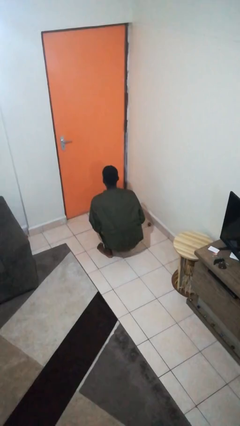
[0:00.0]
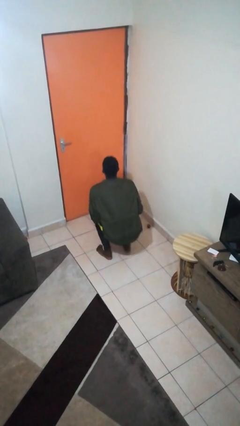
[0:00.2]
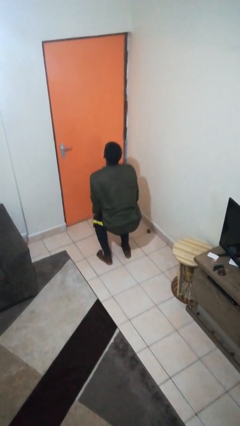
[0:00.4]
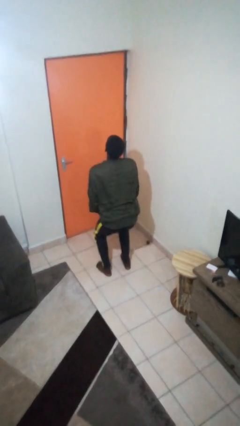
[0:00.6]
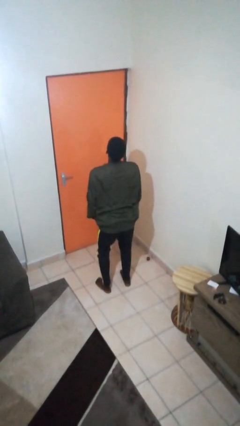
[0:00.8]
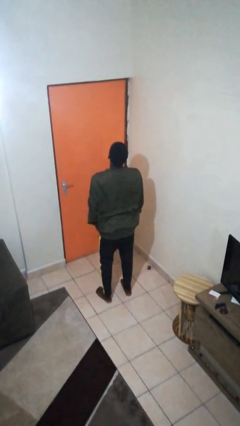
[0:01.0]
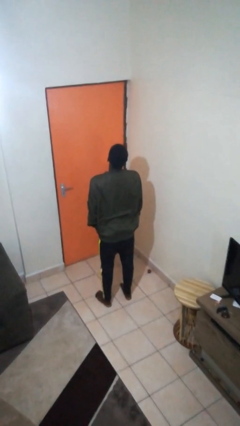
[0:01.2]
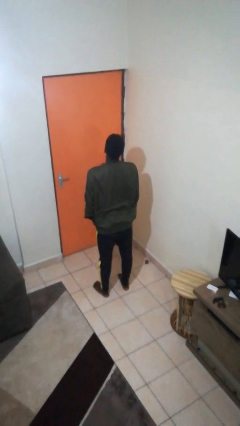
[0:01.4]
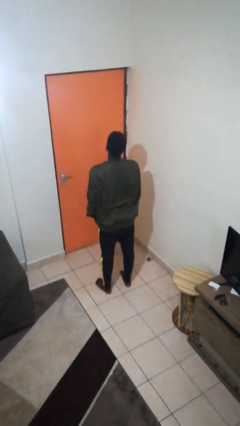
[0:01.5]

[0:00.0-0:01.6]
person stands up

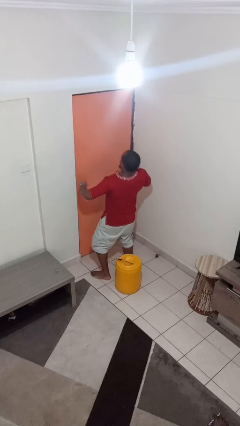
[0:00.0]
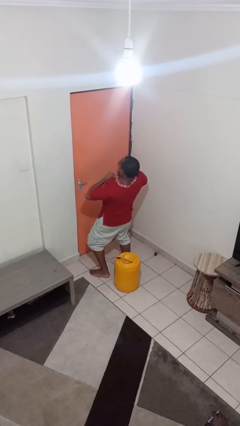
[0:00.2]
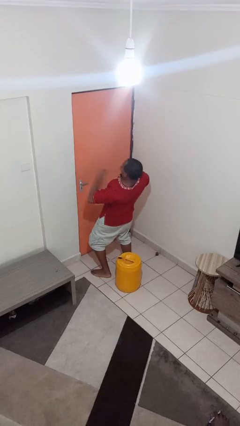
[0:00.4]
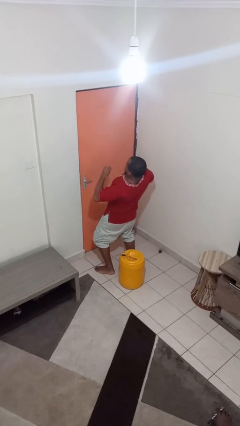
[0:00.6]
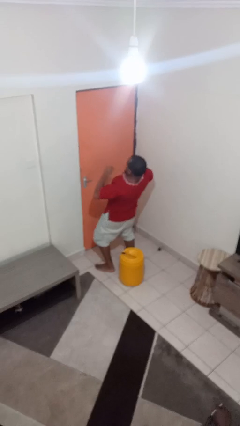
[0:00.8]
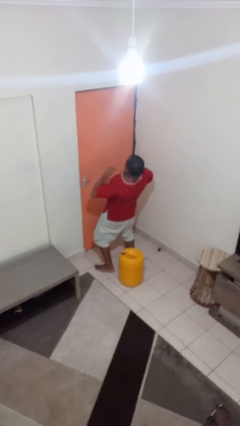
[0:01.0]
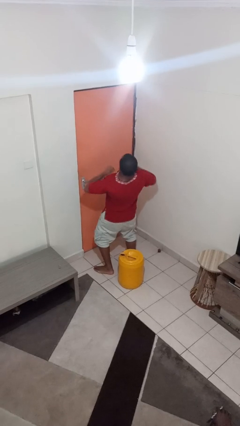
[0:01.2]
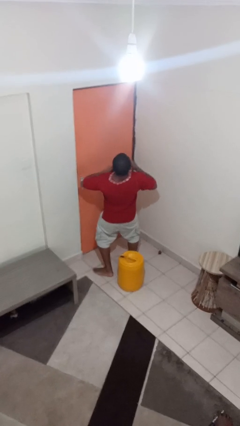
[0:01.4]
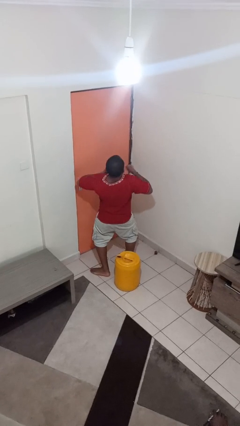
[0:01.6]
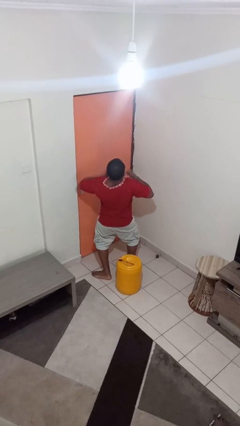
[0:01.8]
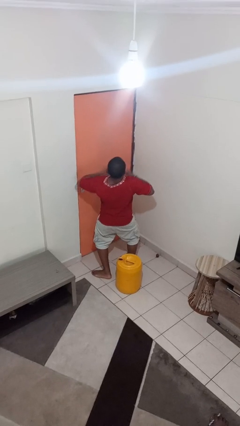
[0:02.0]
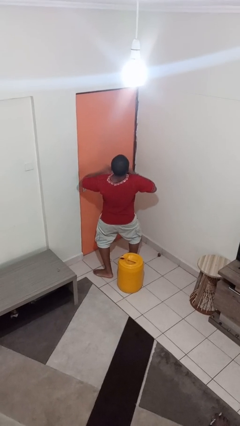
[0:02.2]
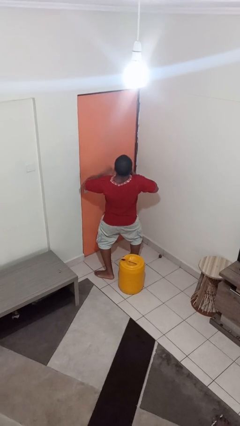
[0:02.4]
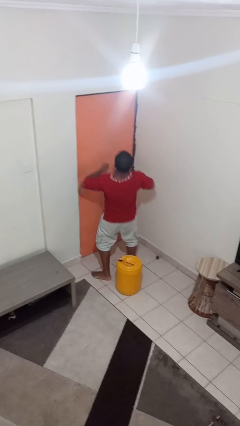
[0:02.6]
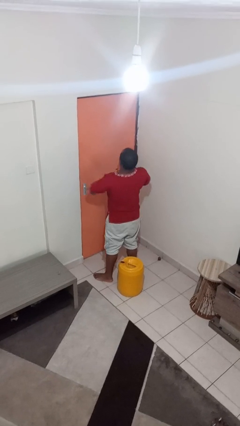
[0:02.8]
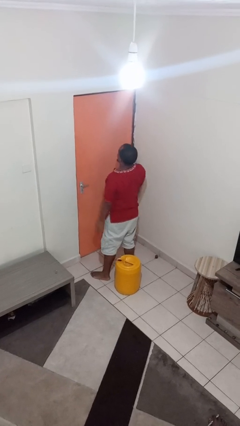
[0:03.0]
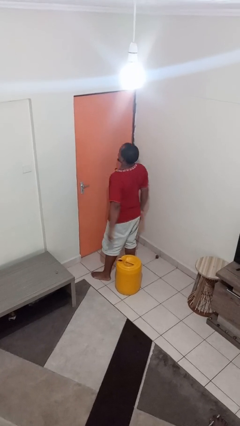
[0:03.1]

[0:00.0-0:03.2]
person drums on chest

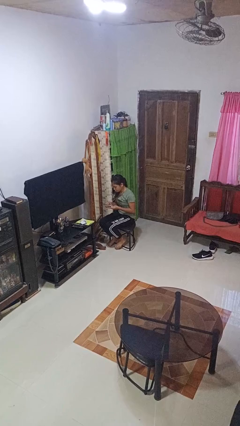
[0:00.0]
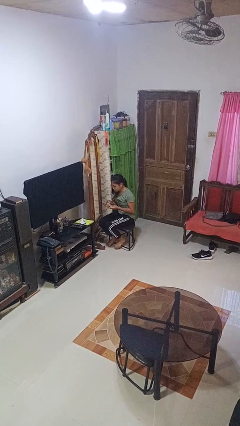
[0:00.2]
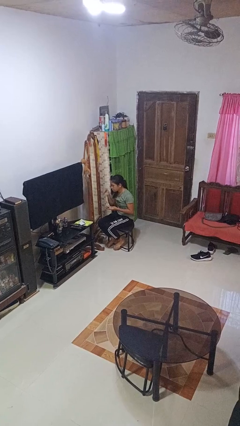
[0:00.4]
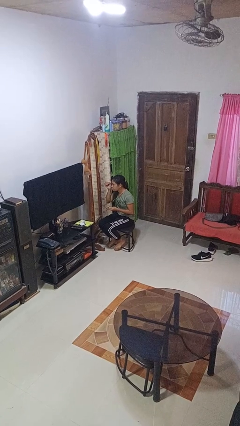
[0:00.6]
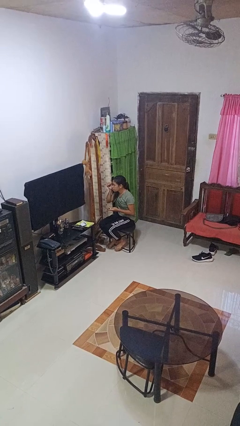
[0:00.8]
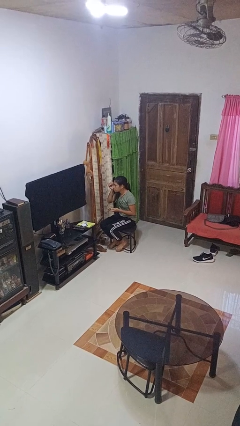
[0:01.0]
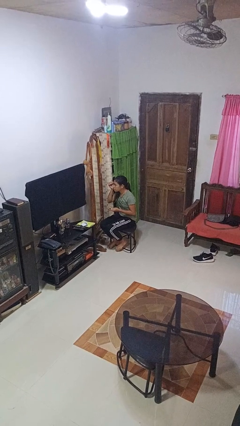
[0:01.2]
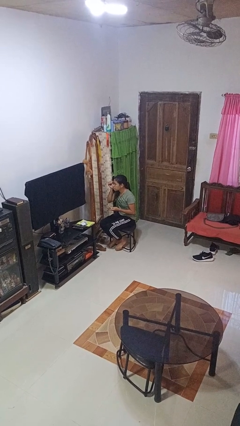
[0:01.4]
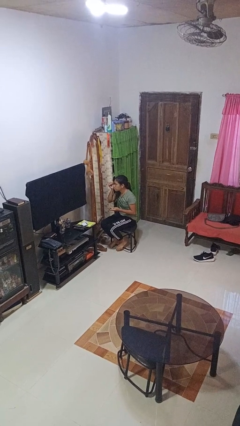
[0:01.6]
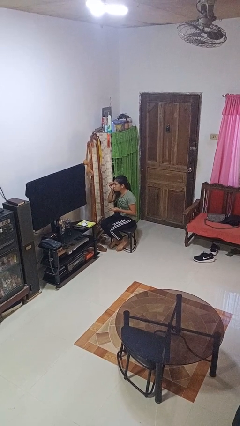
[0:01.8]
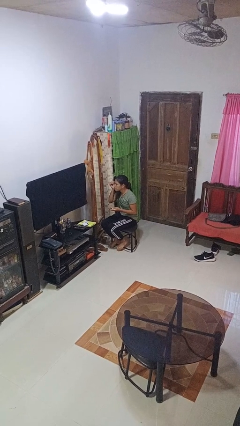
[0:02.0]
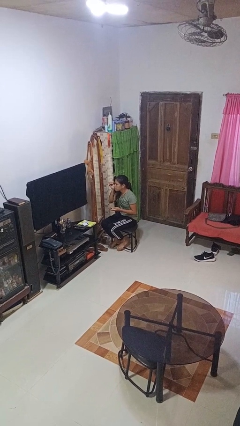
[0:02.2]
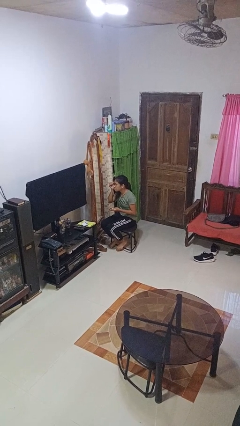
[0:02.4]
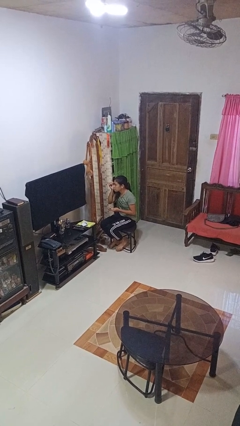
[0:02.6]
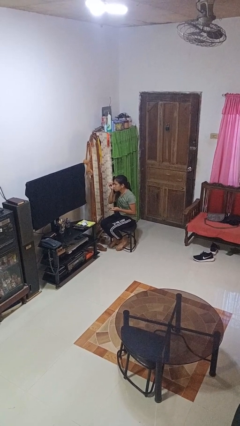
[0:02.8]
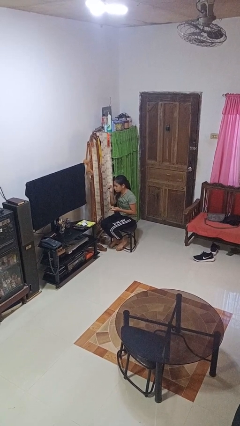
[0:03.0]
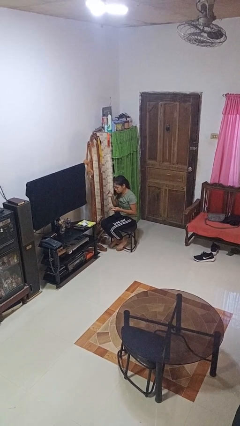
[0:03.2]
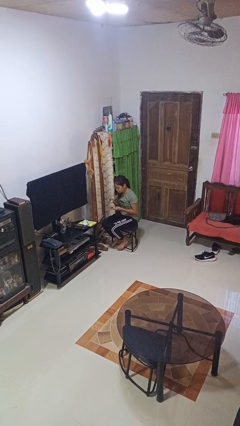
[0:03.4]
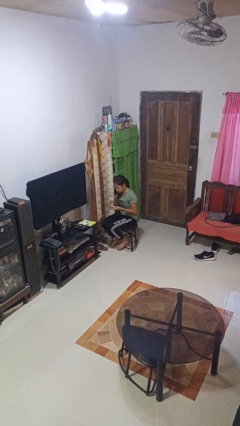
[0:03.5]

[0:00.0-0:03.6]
person applies eye makeup

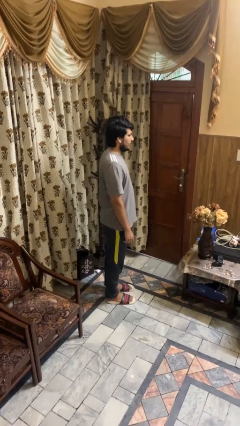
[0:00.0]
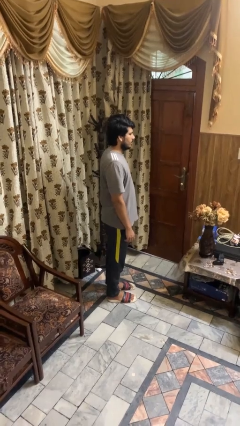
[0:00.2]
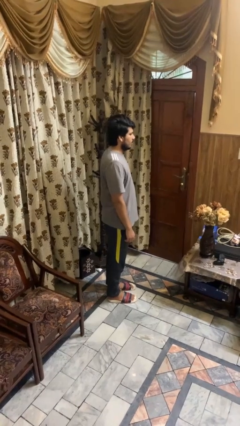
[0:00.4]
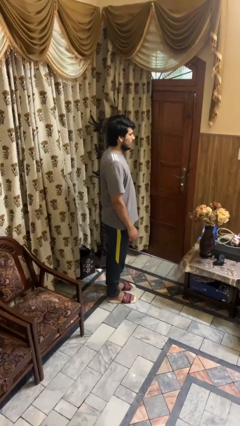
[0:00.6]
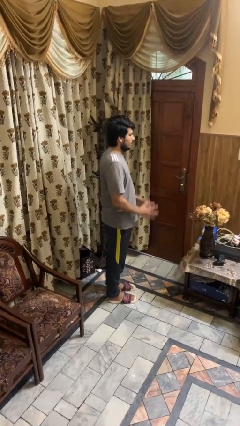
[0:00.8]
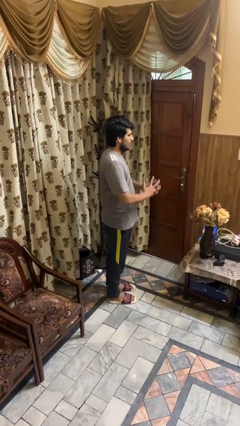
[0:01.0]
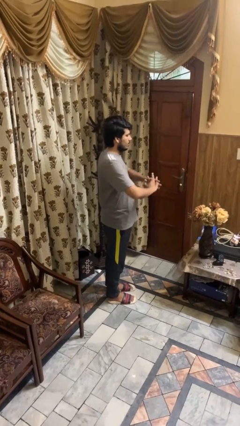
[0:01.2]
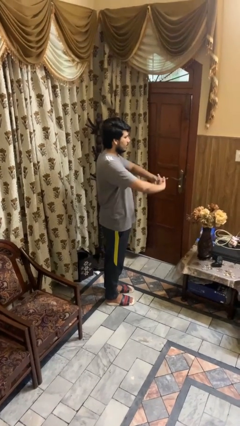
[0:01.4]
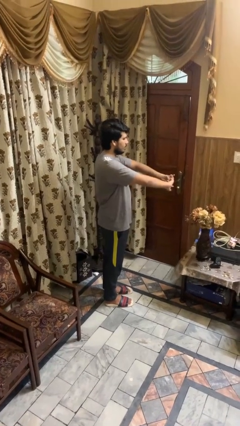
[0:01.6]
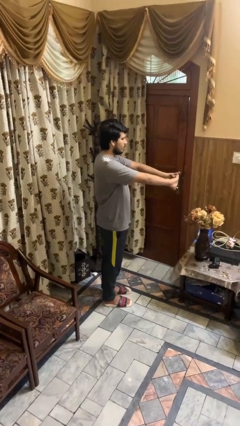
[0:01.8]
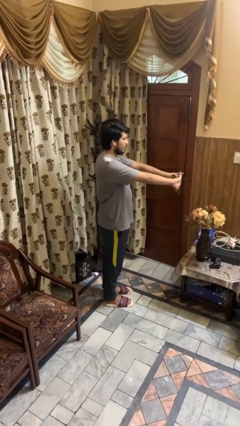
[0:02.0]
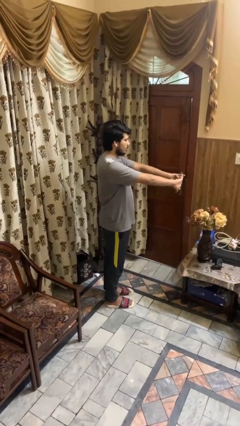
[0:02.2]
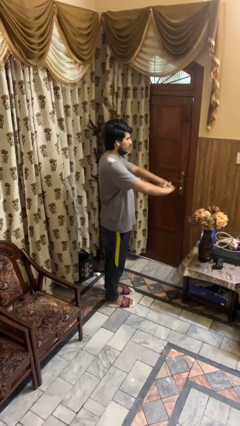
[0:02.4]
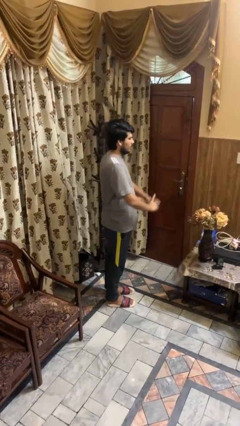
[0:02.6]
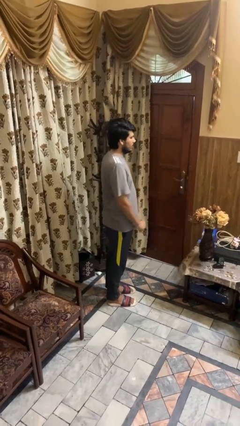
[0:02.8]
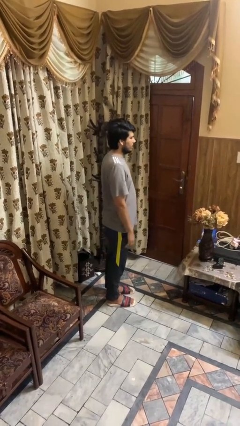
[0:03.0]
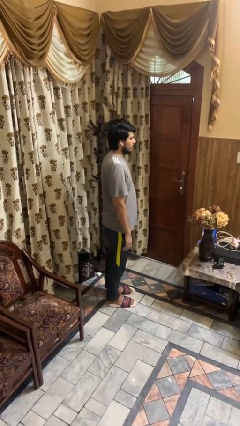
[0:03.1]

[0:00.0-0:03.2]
person cracks knuckles

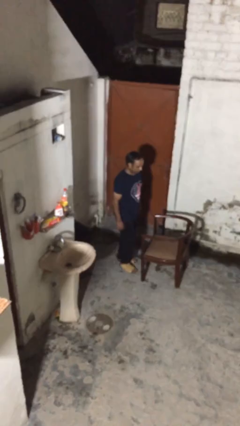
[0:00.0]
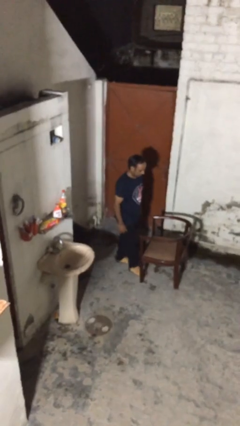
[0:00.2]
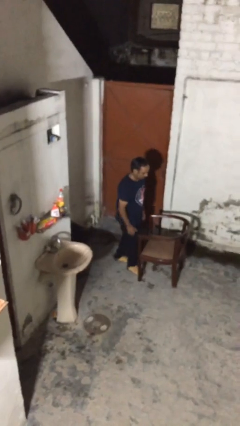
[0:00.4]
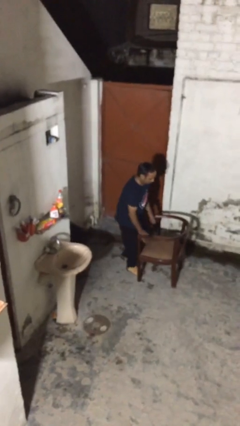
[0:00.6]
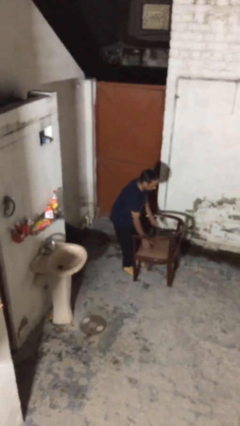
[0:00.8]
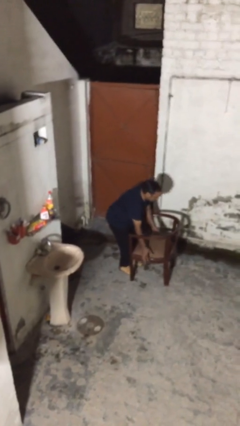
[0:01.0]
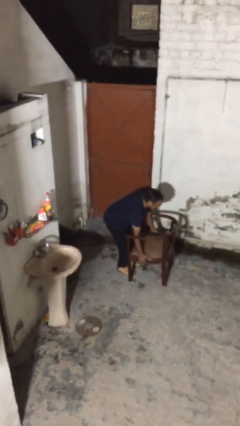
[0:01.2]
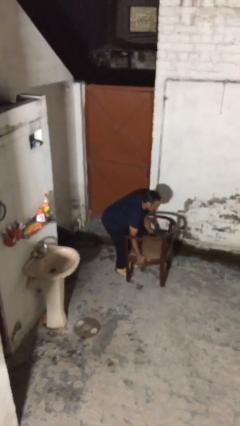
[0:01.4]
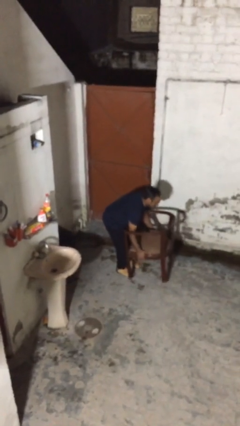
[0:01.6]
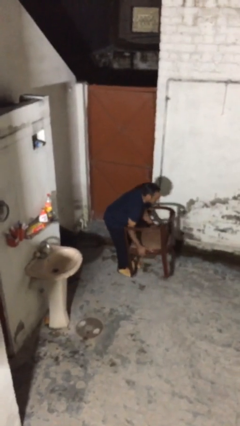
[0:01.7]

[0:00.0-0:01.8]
person picks up object from floor

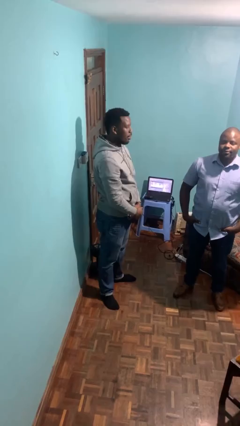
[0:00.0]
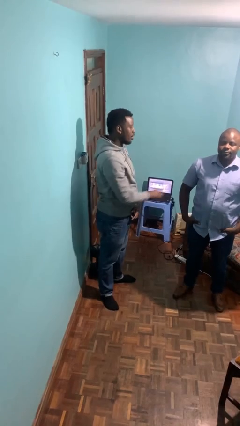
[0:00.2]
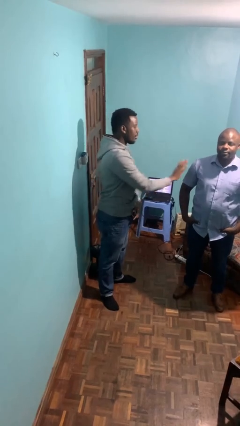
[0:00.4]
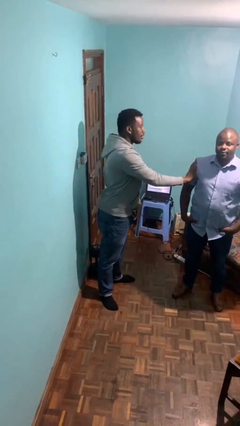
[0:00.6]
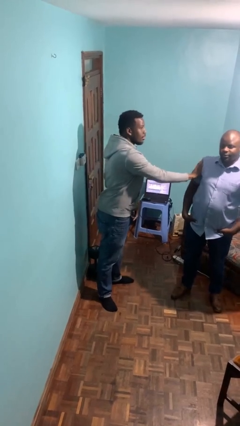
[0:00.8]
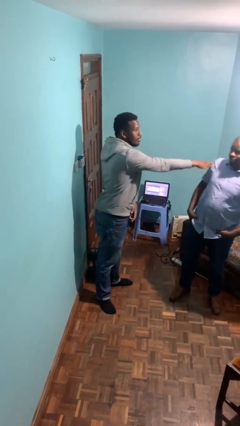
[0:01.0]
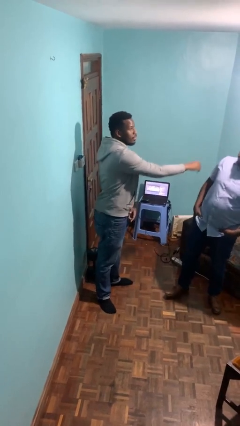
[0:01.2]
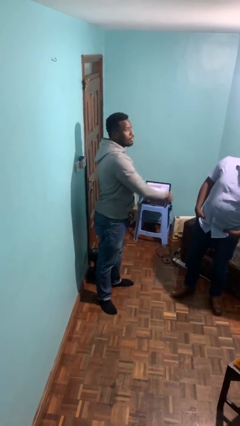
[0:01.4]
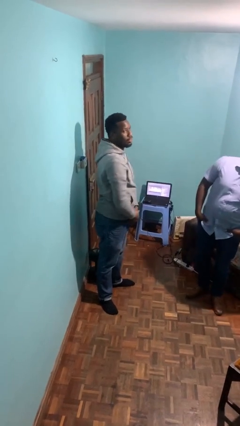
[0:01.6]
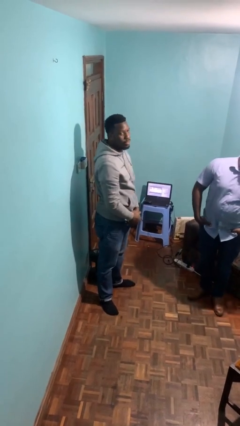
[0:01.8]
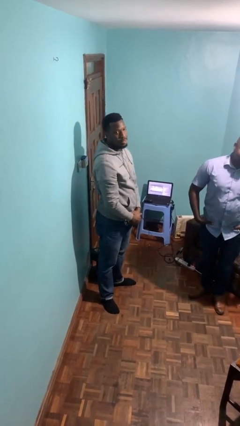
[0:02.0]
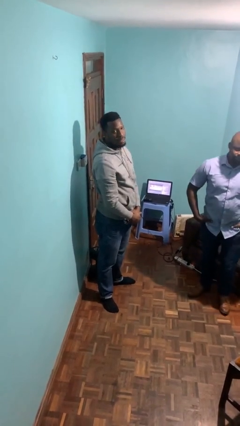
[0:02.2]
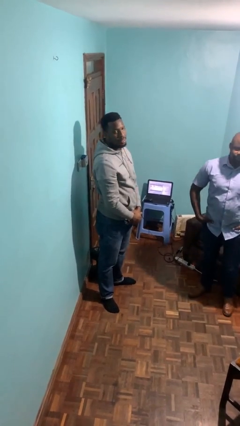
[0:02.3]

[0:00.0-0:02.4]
person shoves person

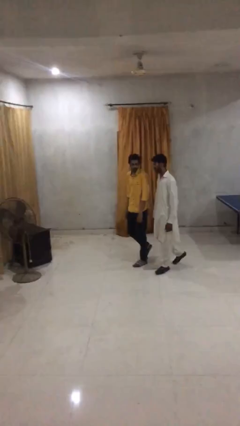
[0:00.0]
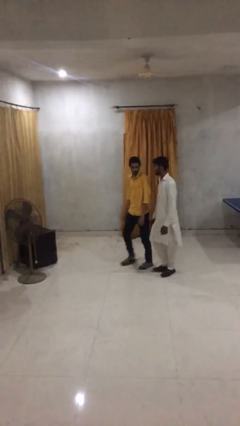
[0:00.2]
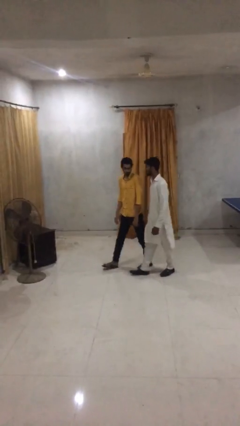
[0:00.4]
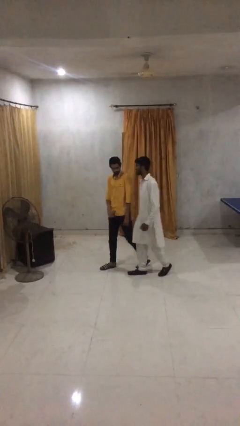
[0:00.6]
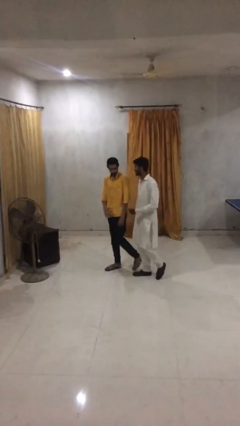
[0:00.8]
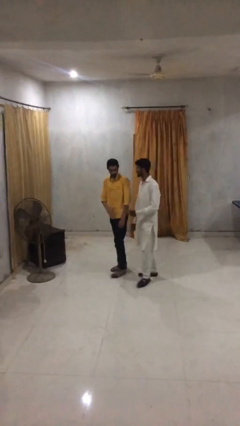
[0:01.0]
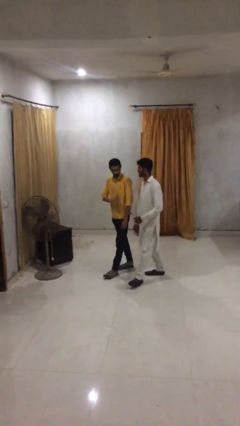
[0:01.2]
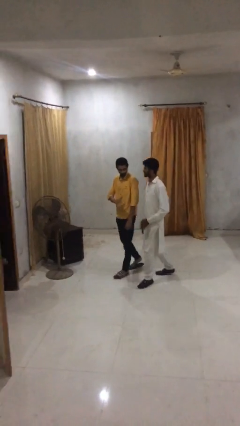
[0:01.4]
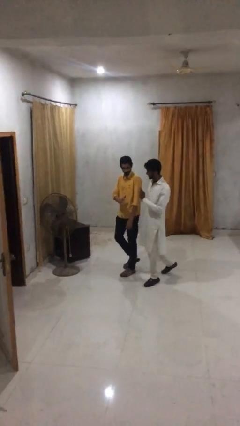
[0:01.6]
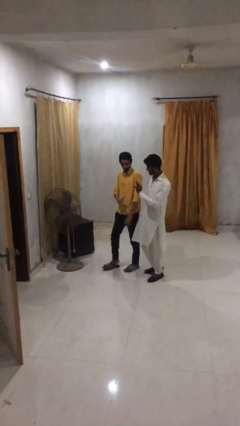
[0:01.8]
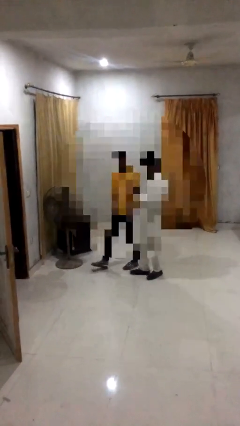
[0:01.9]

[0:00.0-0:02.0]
person talks to person
